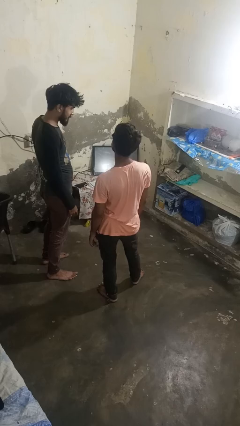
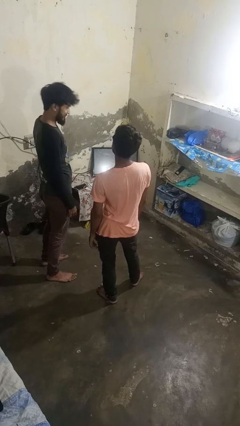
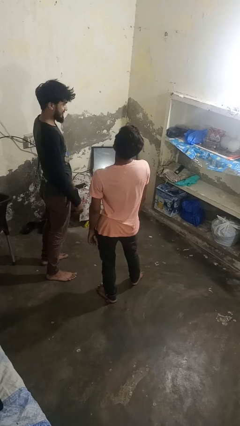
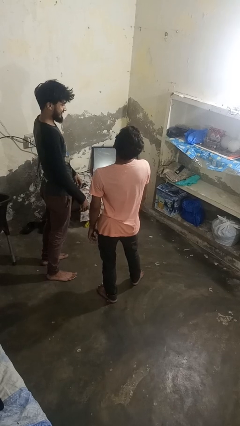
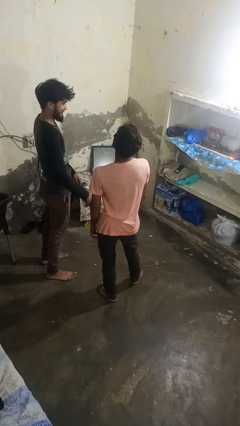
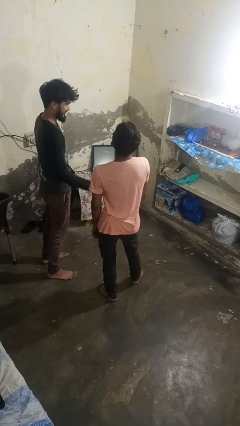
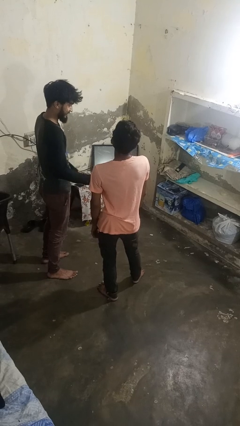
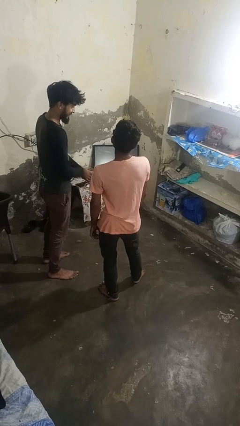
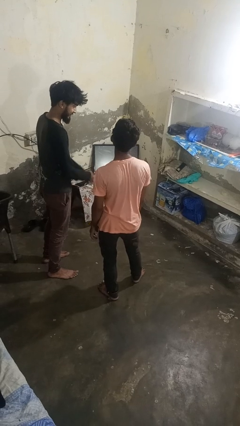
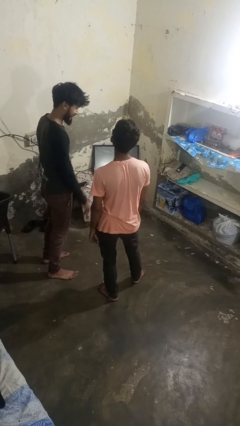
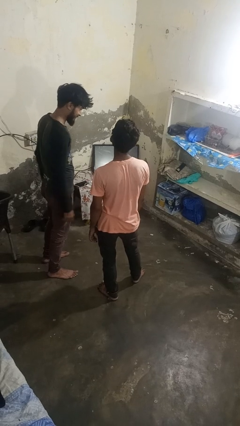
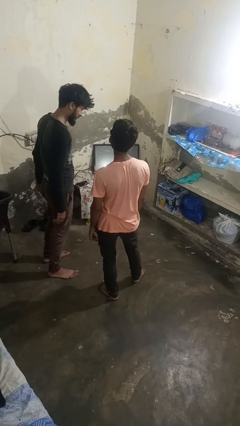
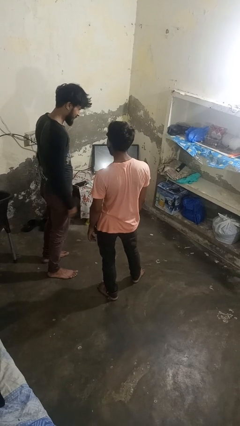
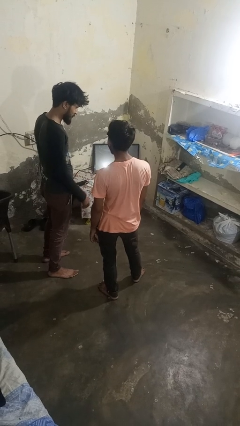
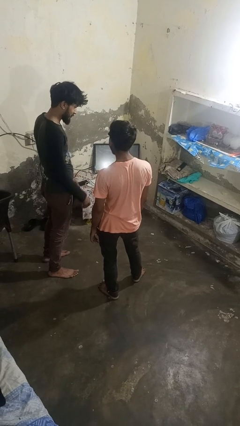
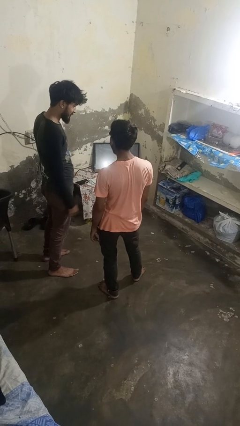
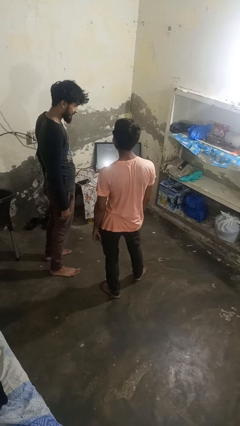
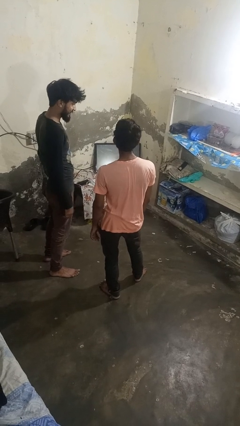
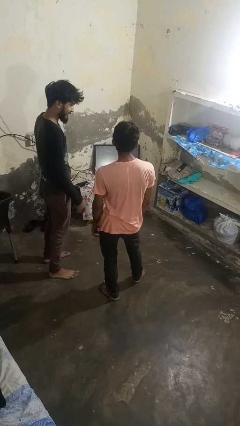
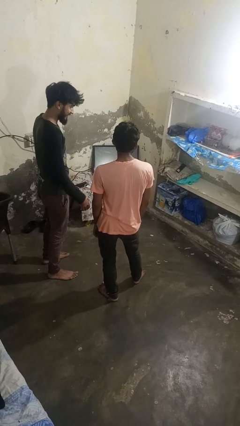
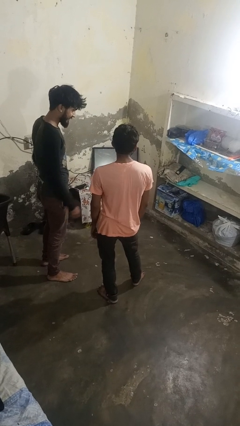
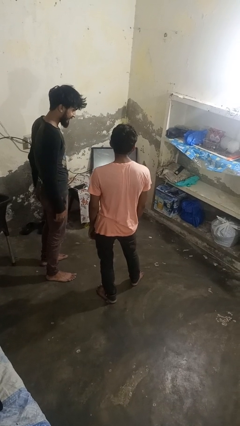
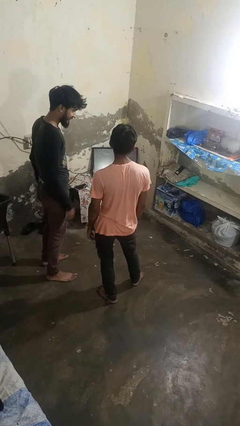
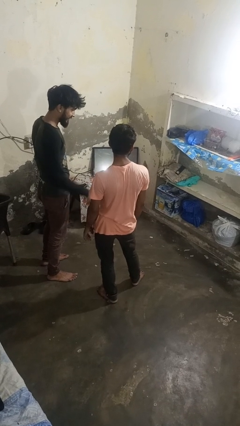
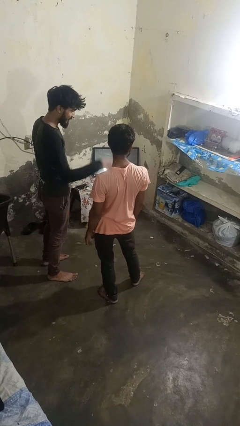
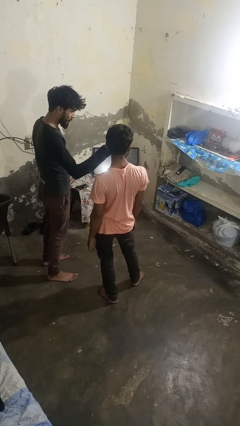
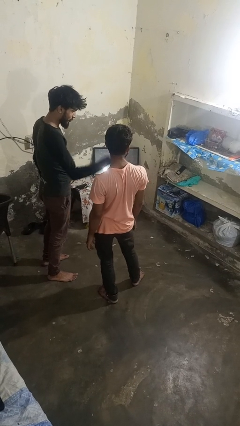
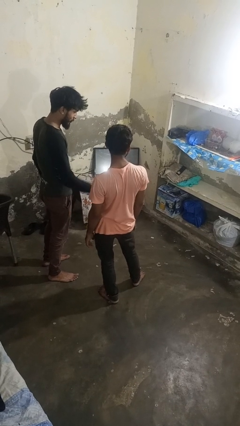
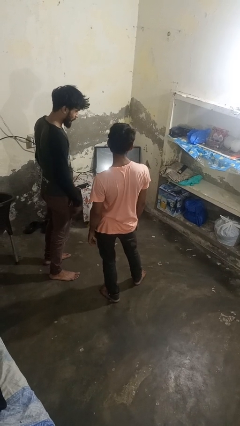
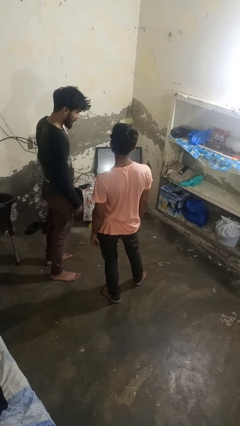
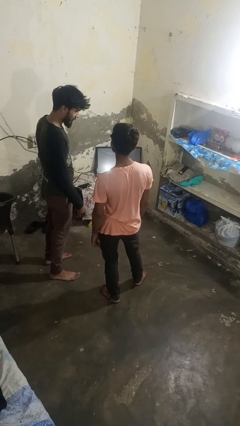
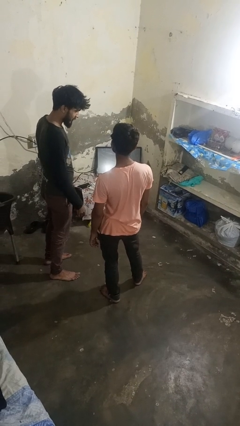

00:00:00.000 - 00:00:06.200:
person laughs with person

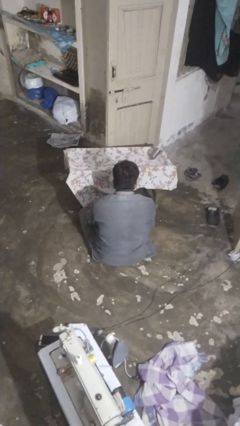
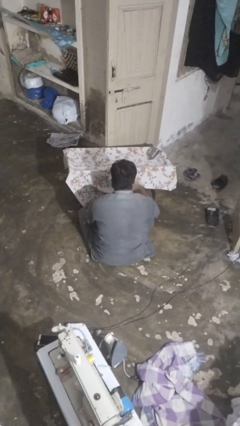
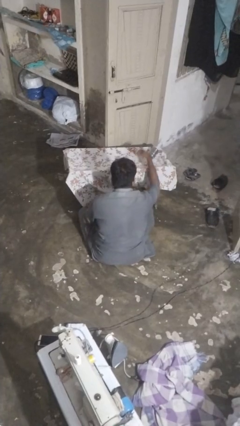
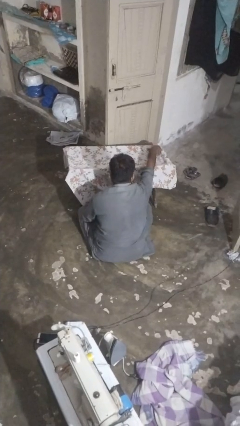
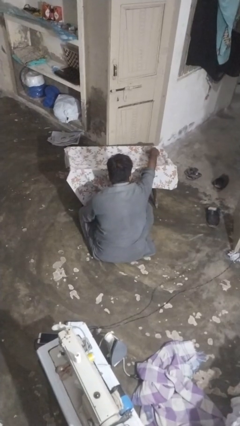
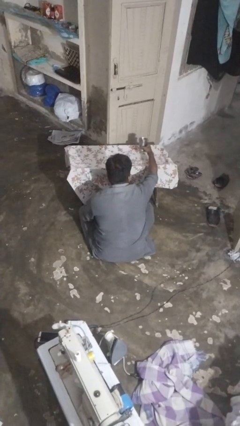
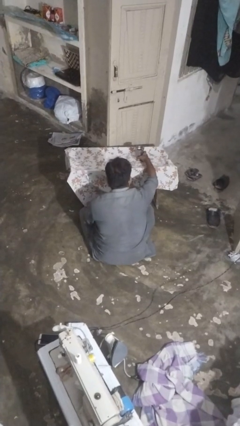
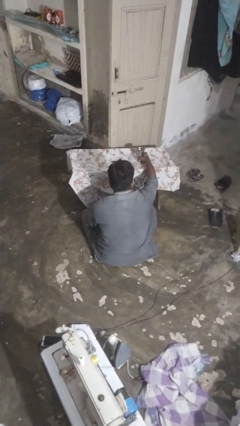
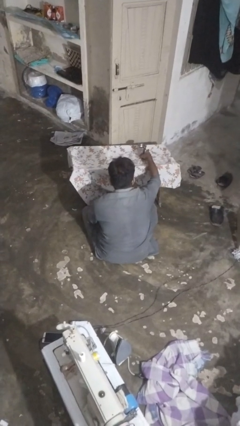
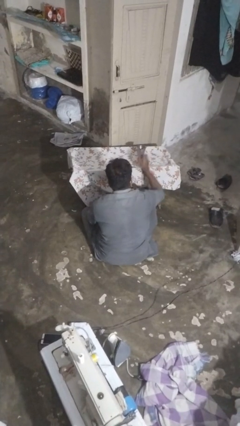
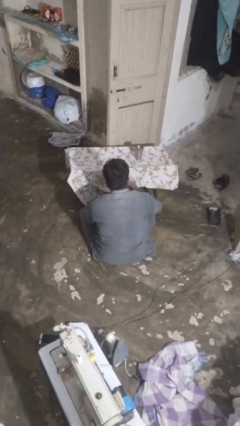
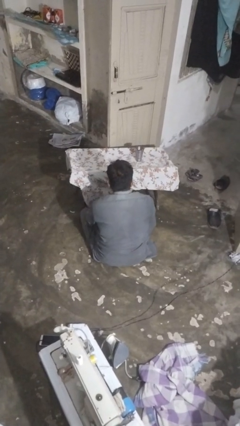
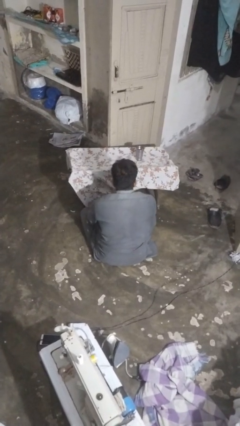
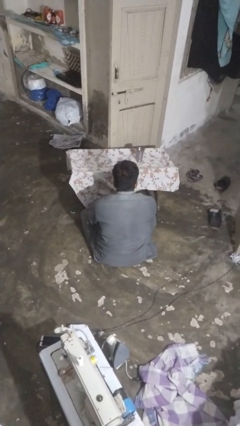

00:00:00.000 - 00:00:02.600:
person sets upright glass

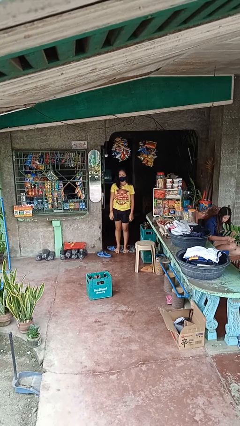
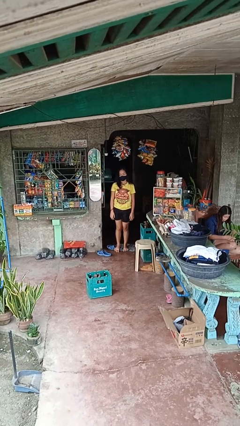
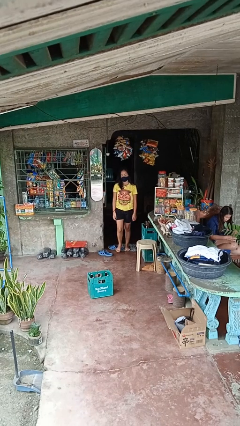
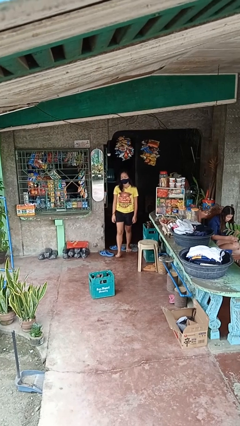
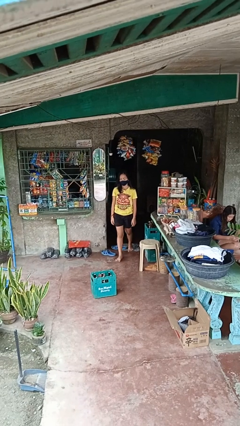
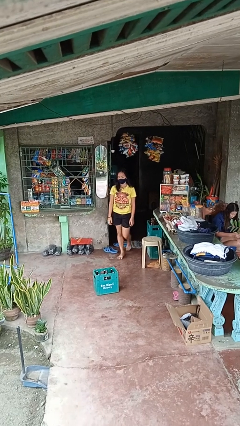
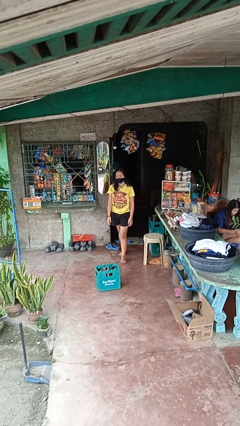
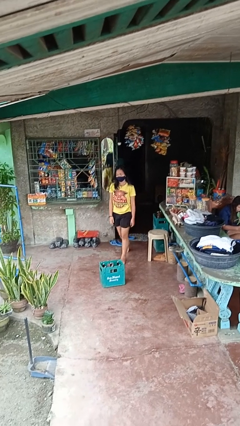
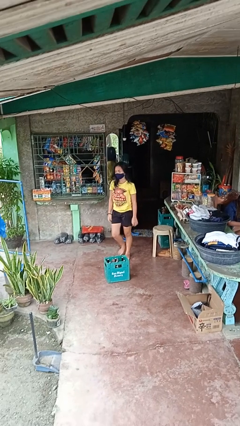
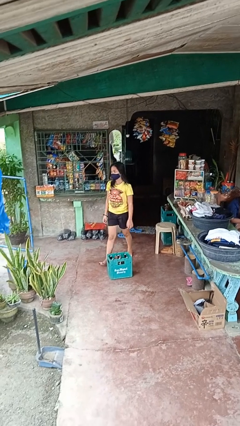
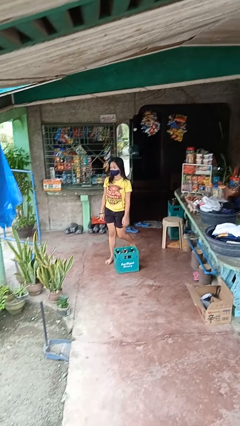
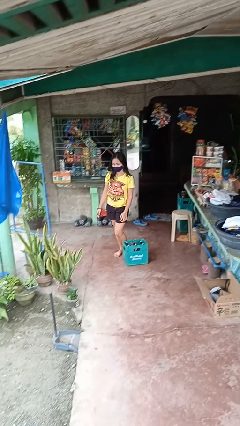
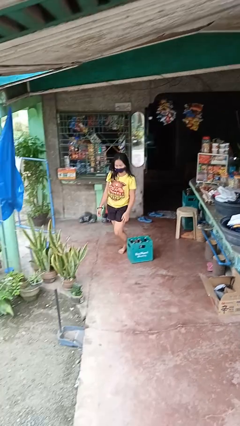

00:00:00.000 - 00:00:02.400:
person trips on object on floor

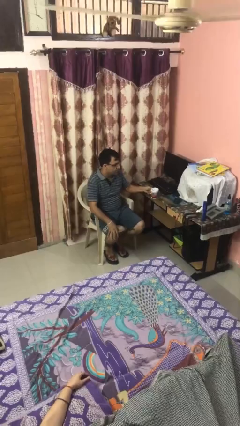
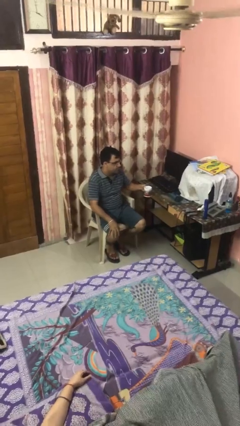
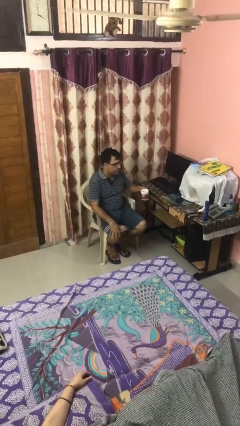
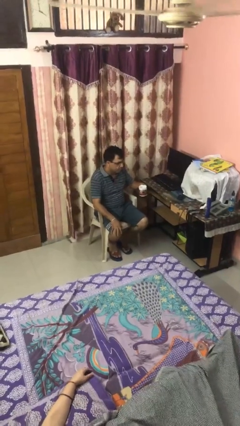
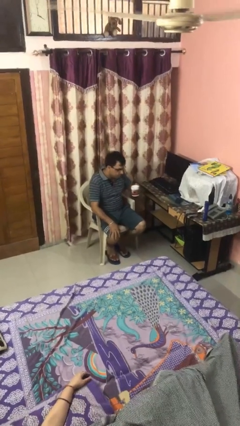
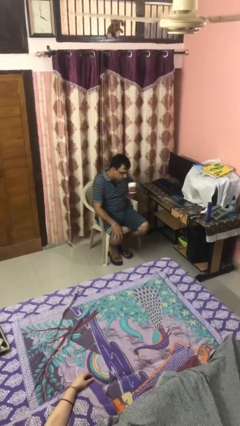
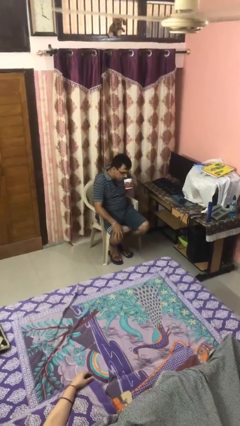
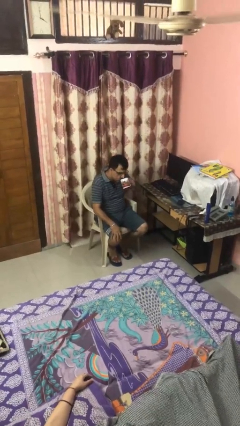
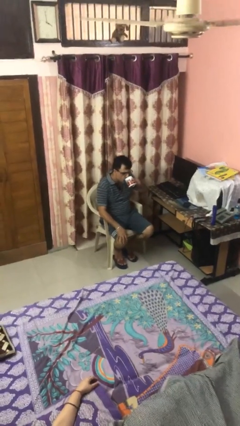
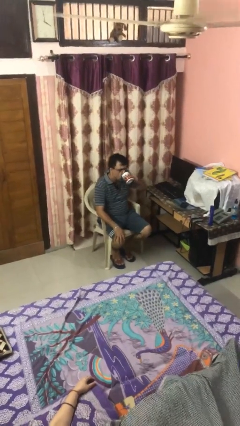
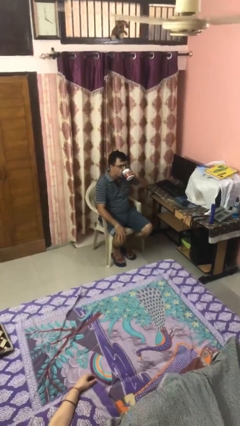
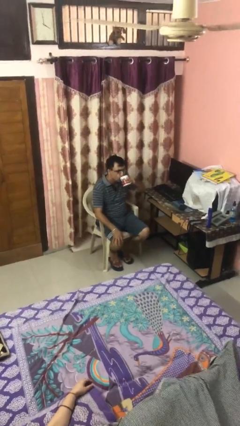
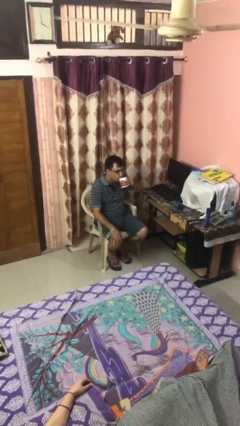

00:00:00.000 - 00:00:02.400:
person drinks from mug

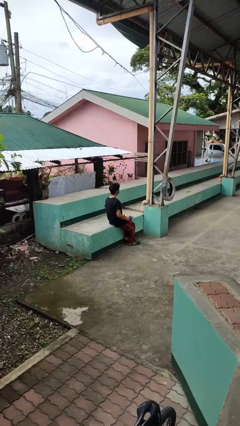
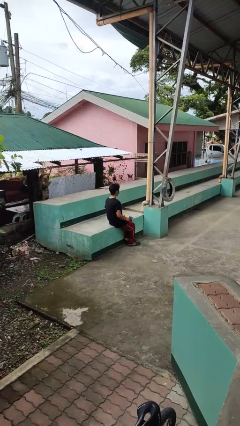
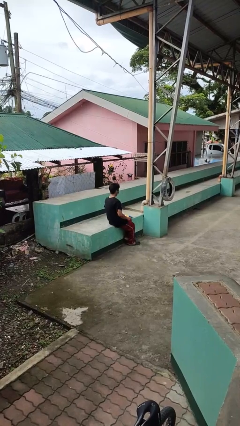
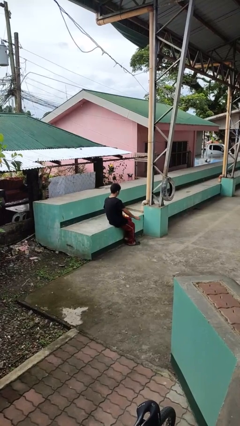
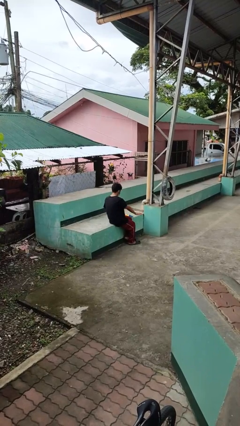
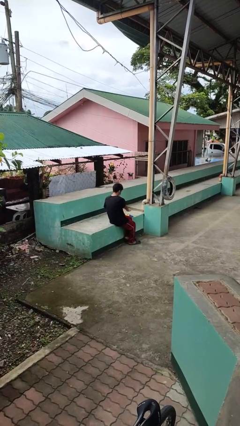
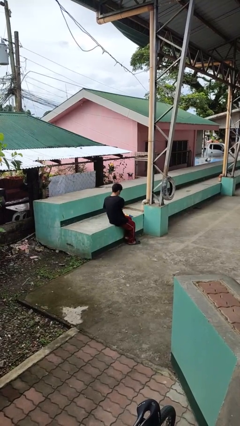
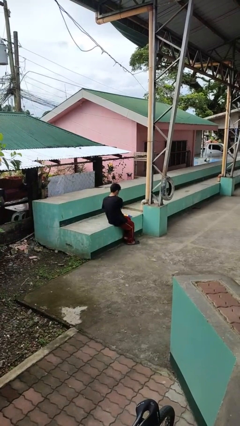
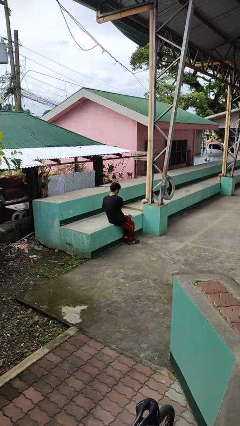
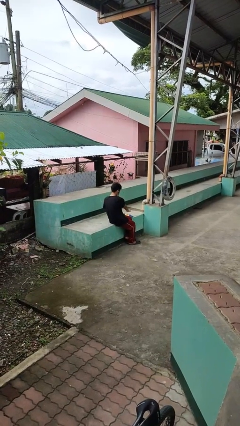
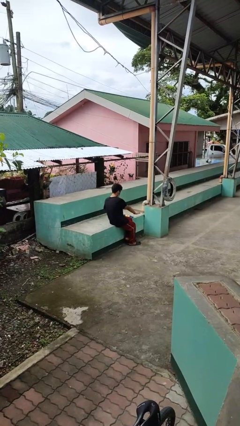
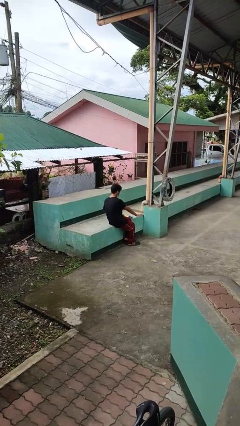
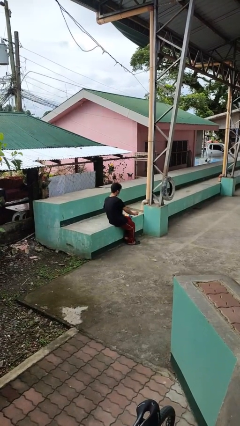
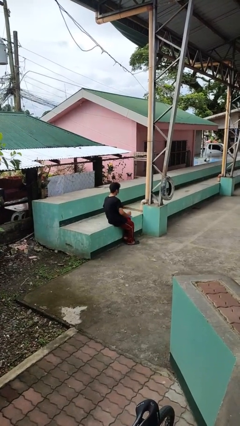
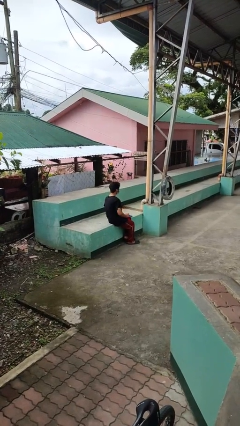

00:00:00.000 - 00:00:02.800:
person waves hand over object

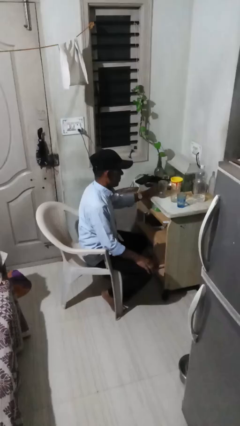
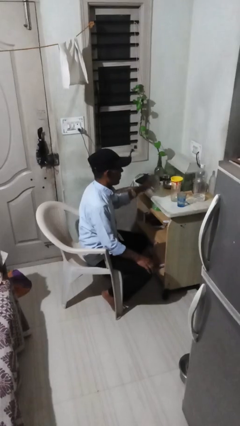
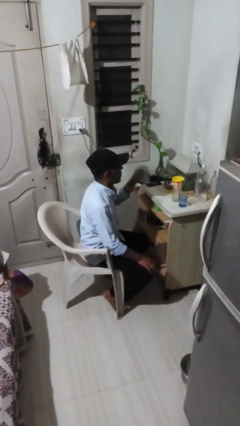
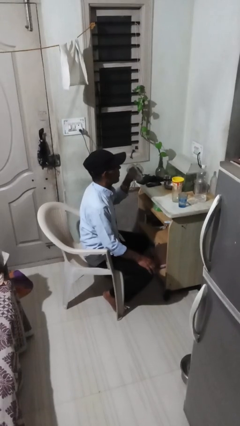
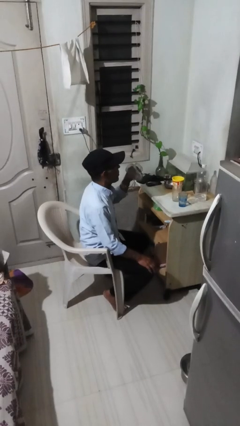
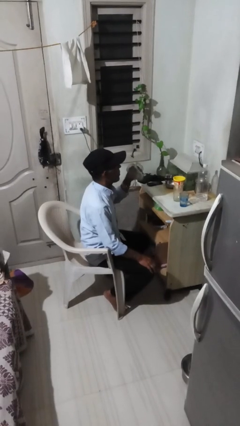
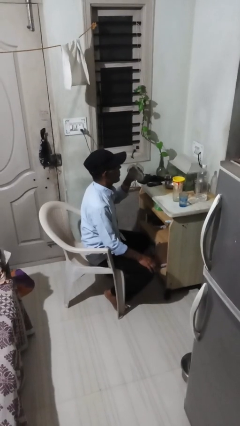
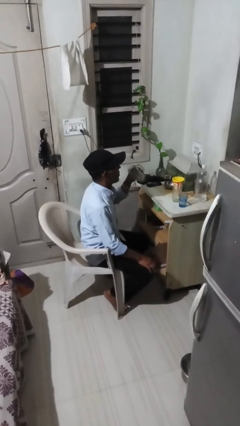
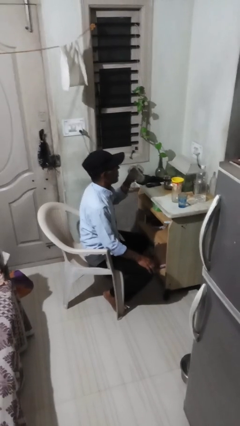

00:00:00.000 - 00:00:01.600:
person picks up object from table
